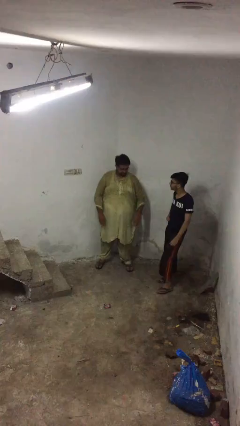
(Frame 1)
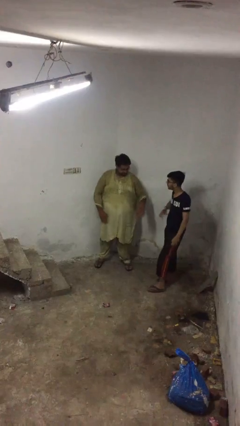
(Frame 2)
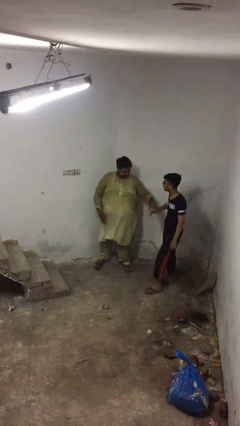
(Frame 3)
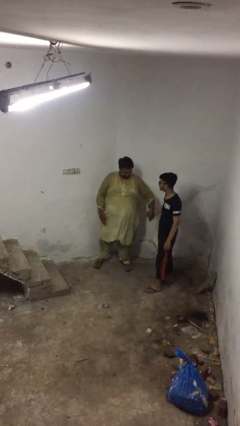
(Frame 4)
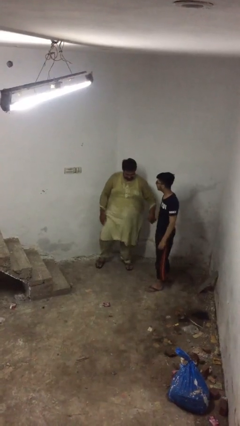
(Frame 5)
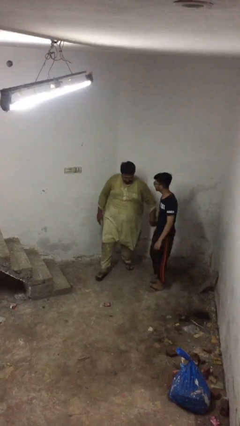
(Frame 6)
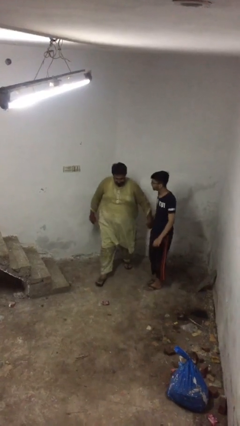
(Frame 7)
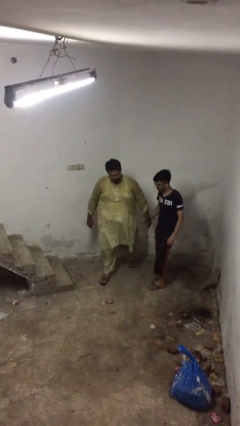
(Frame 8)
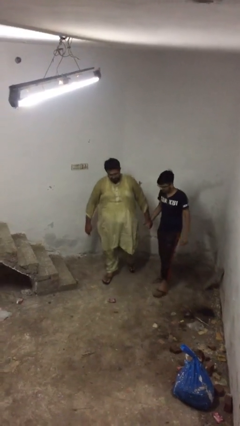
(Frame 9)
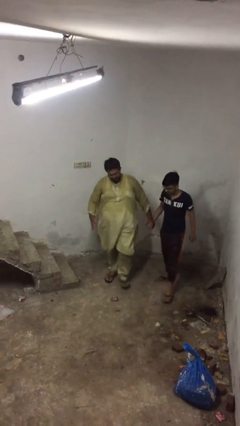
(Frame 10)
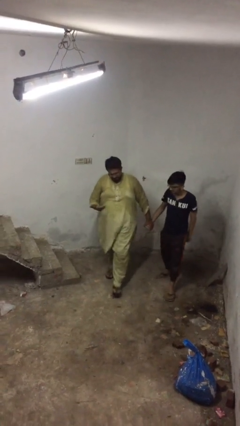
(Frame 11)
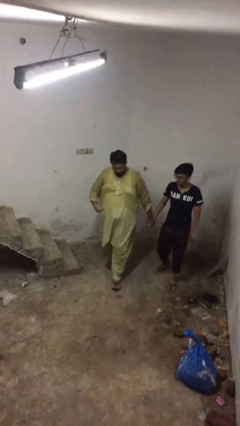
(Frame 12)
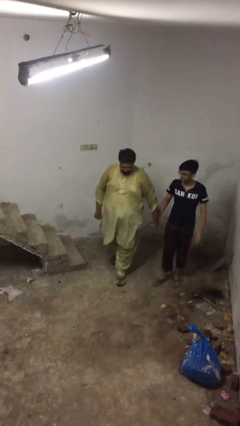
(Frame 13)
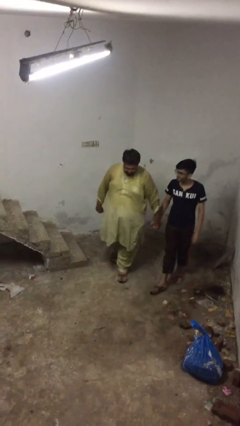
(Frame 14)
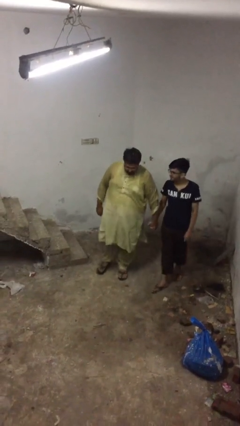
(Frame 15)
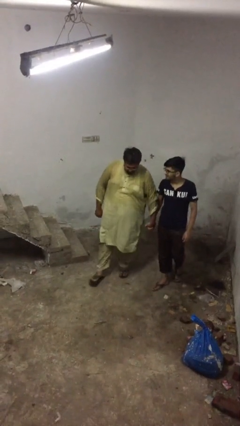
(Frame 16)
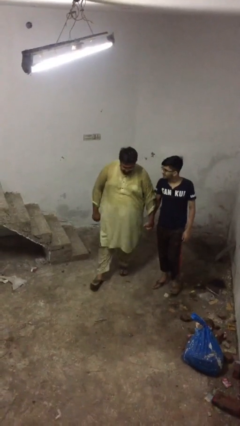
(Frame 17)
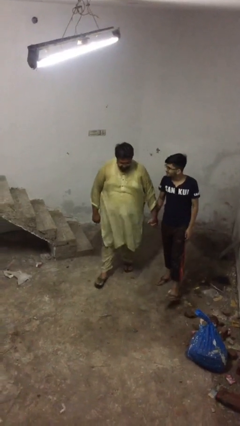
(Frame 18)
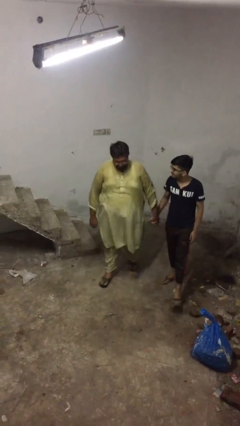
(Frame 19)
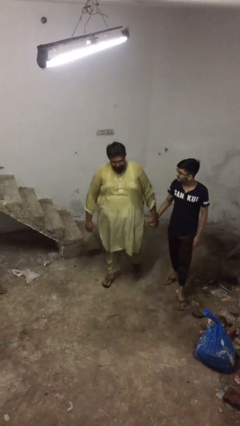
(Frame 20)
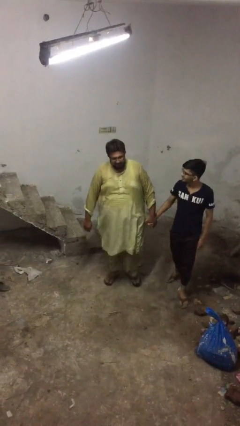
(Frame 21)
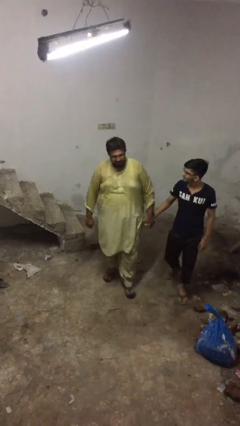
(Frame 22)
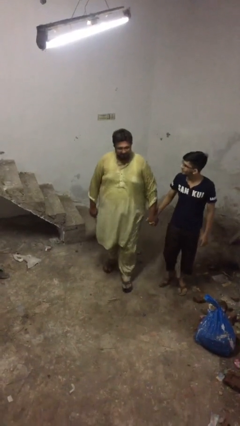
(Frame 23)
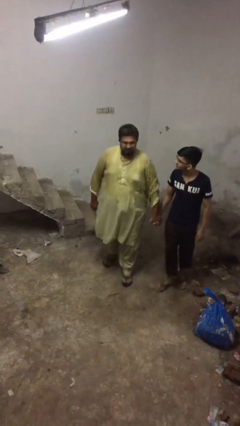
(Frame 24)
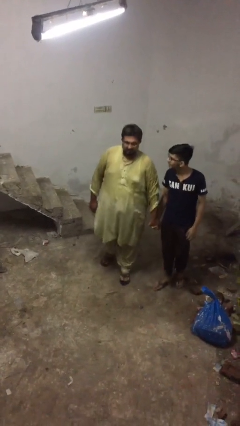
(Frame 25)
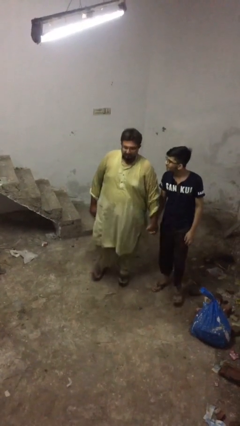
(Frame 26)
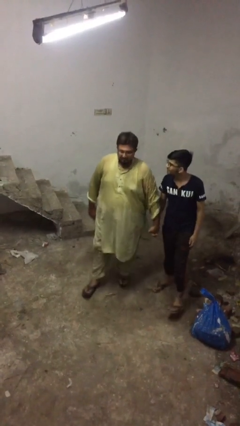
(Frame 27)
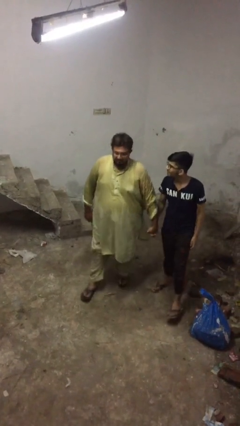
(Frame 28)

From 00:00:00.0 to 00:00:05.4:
person holds hand

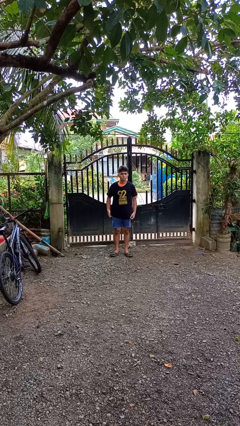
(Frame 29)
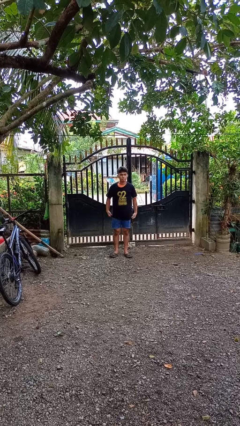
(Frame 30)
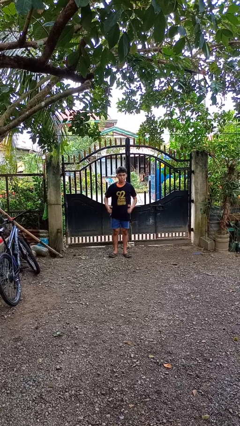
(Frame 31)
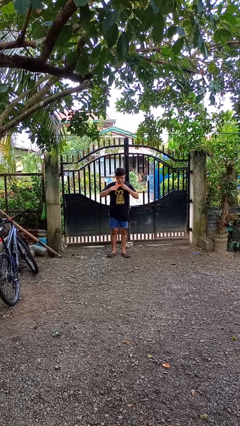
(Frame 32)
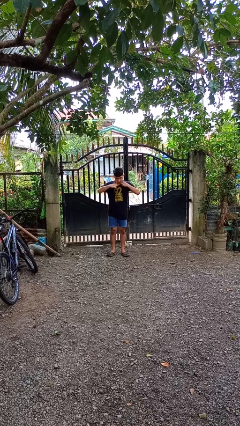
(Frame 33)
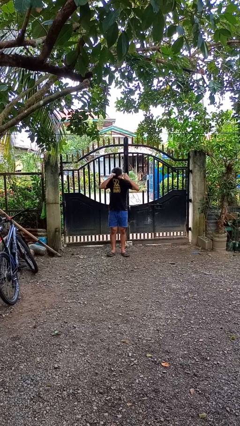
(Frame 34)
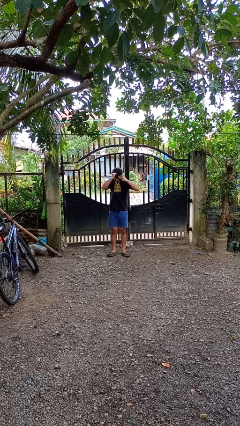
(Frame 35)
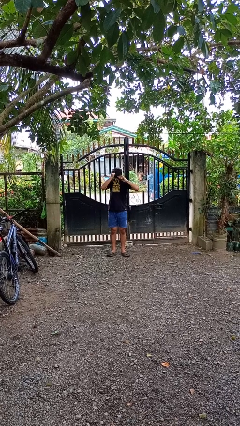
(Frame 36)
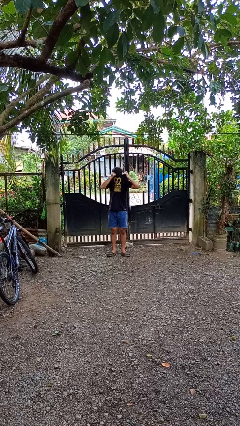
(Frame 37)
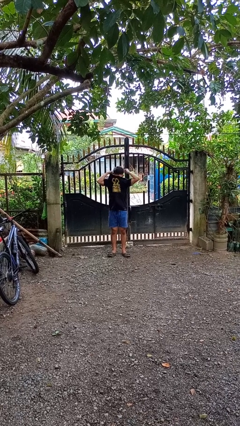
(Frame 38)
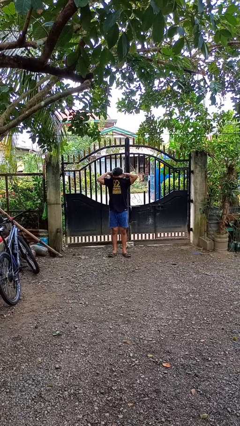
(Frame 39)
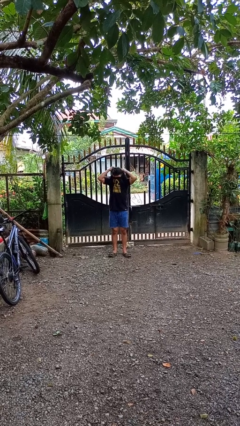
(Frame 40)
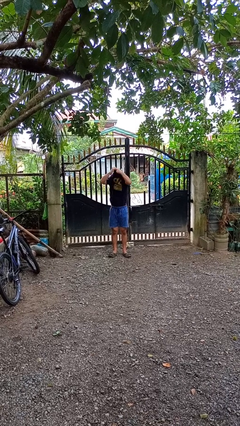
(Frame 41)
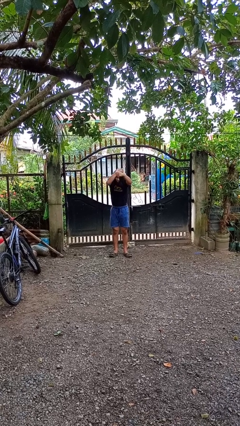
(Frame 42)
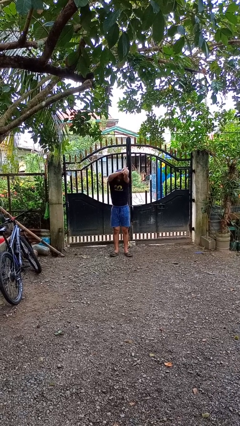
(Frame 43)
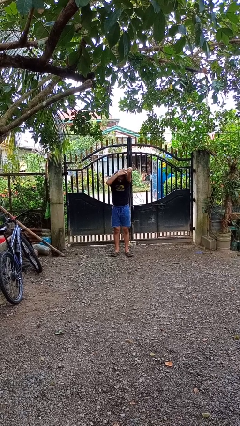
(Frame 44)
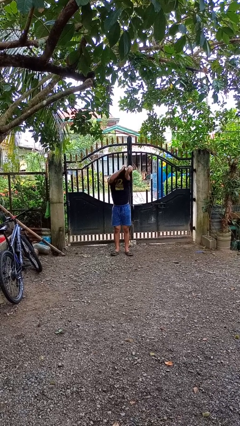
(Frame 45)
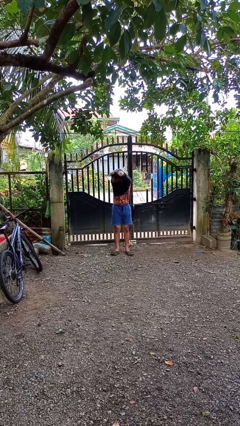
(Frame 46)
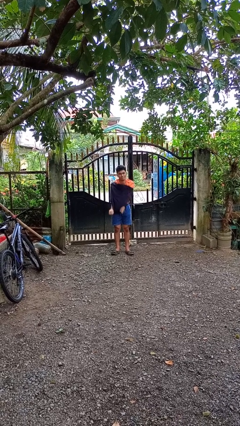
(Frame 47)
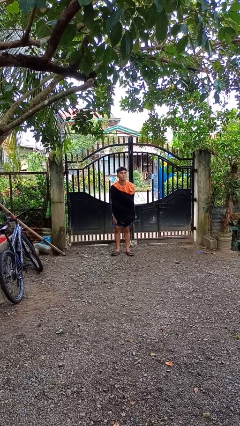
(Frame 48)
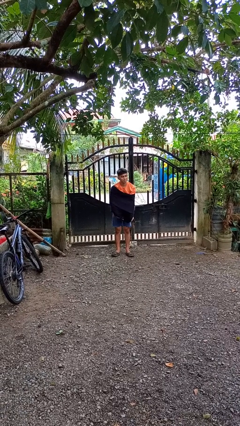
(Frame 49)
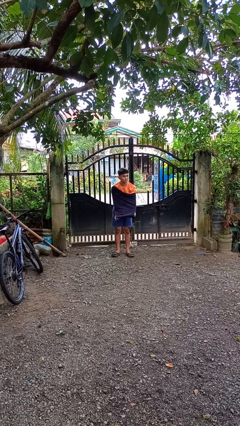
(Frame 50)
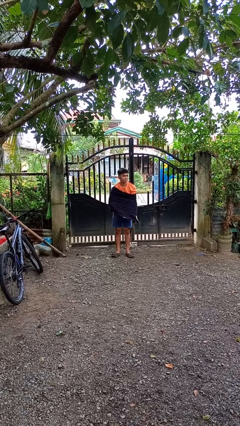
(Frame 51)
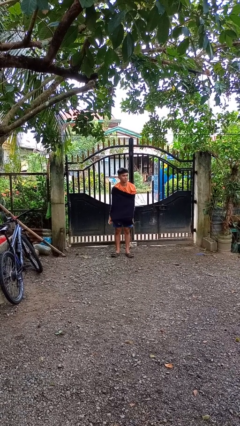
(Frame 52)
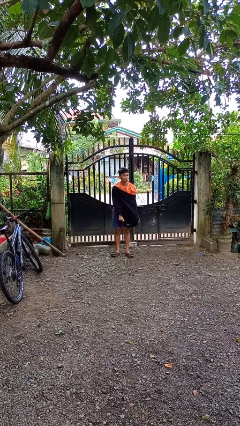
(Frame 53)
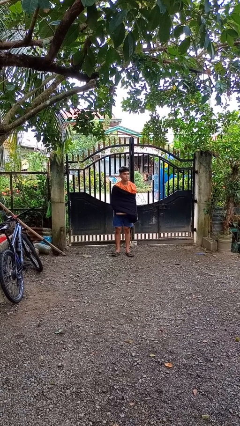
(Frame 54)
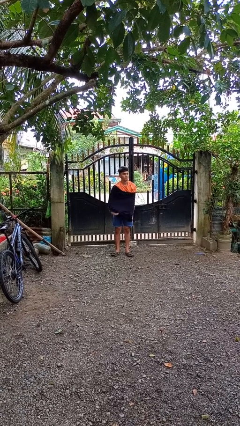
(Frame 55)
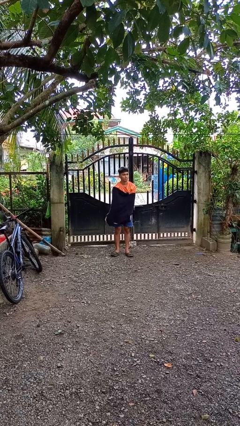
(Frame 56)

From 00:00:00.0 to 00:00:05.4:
person takes off shirt

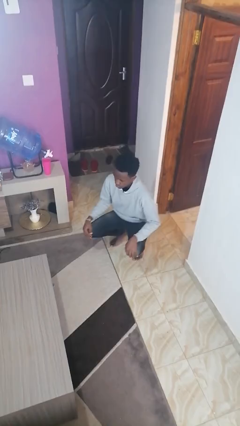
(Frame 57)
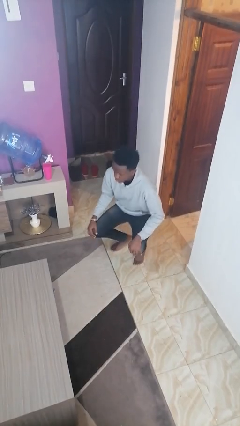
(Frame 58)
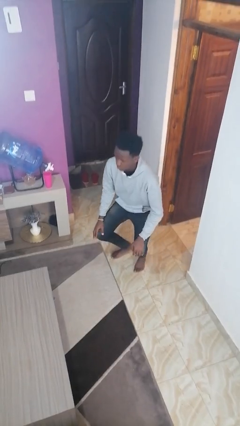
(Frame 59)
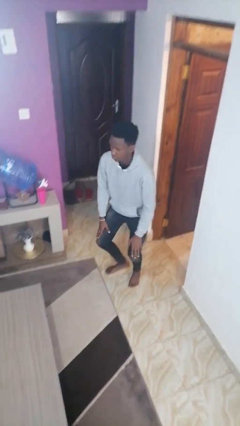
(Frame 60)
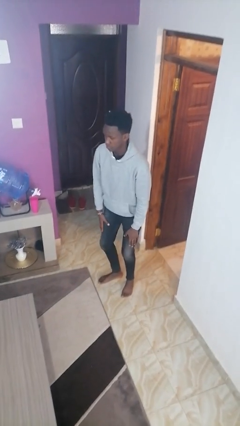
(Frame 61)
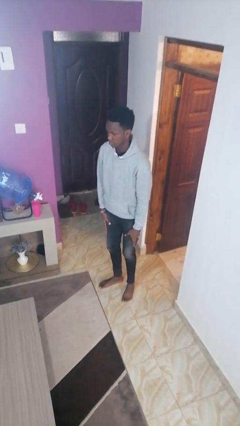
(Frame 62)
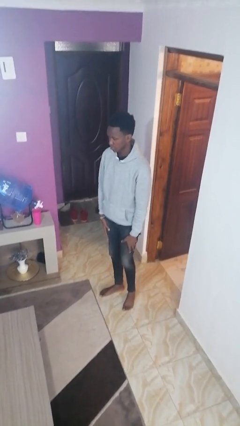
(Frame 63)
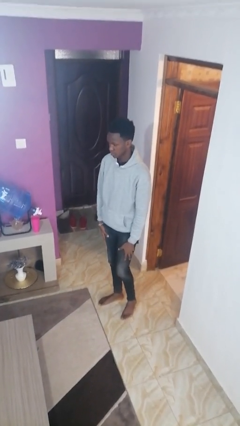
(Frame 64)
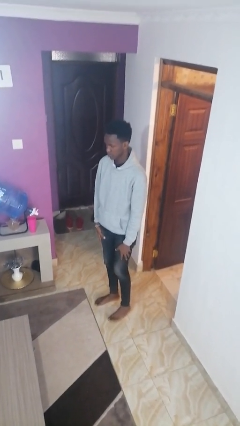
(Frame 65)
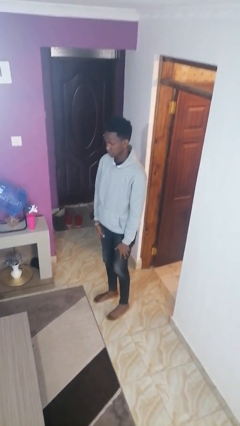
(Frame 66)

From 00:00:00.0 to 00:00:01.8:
person stands up

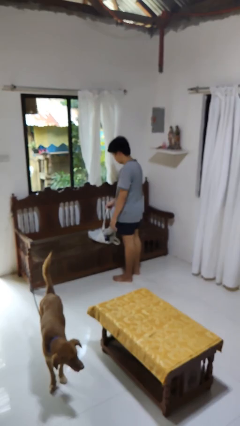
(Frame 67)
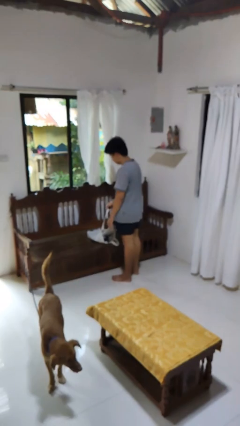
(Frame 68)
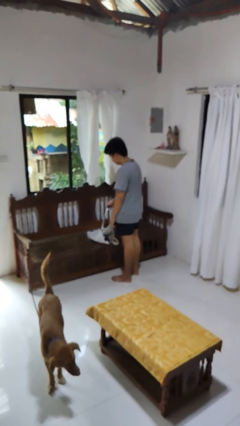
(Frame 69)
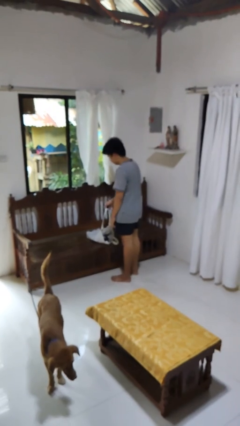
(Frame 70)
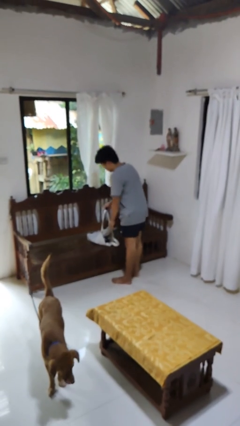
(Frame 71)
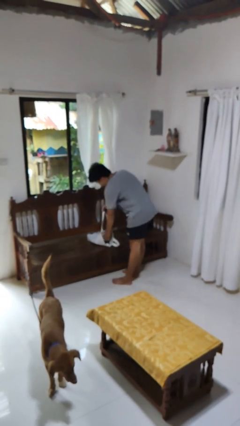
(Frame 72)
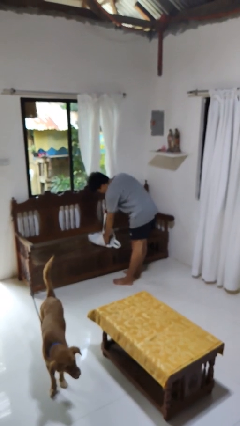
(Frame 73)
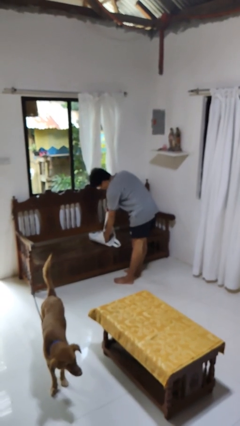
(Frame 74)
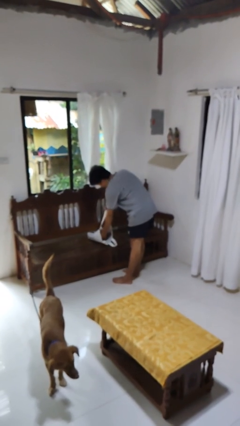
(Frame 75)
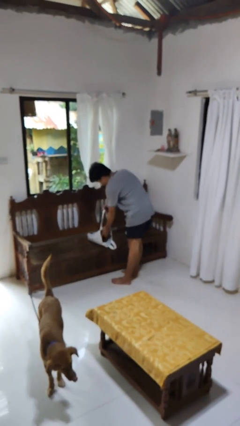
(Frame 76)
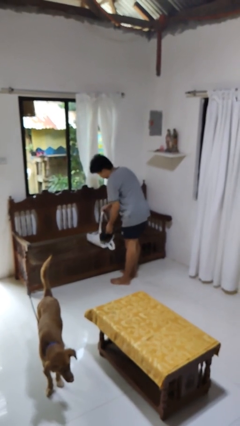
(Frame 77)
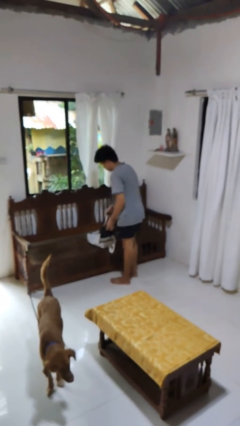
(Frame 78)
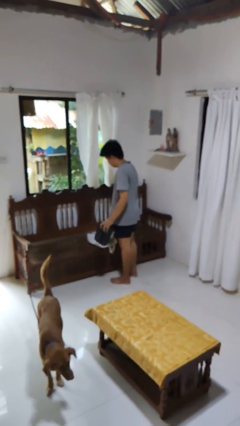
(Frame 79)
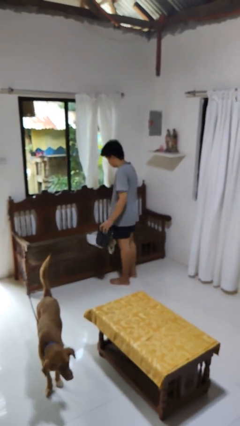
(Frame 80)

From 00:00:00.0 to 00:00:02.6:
person takes object from bag

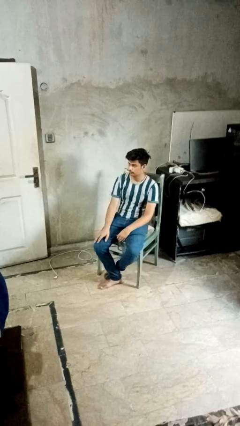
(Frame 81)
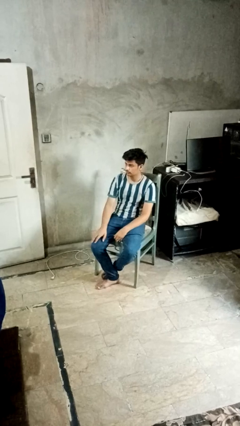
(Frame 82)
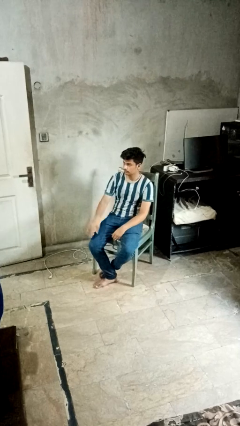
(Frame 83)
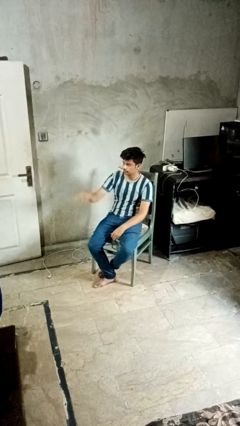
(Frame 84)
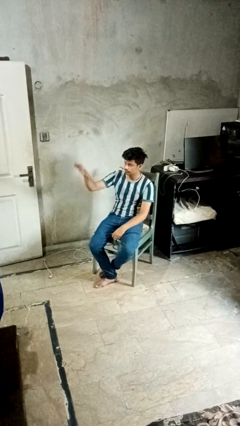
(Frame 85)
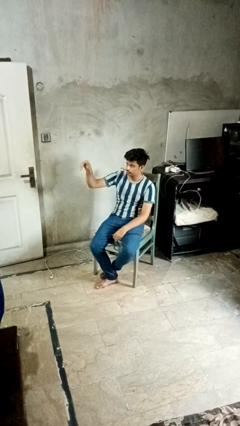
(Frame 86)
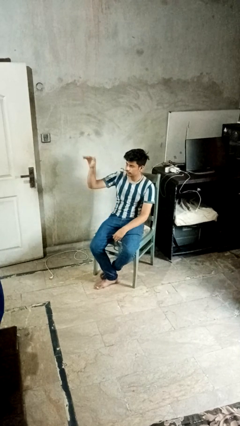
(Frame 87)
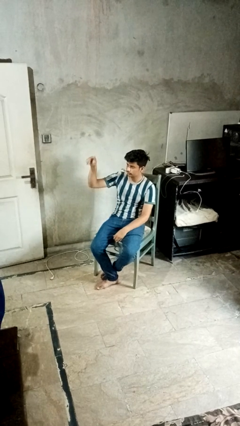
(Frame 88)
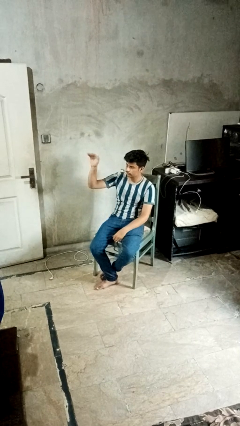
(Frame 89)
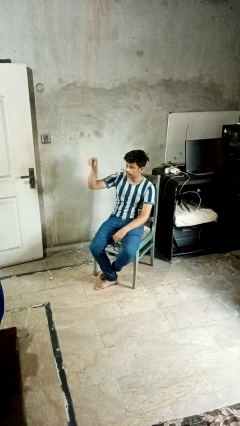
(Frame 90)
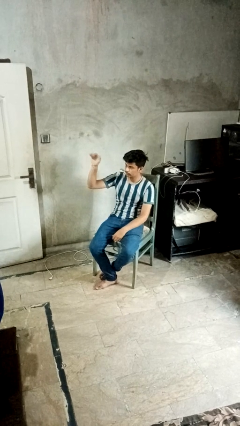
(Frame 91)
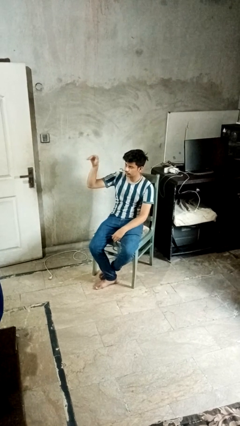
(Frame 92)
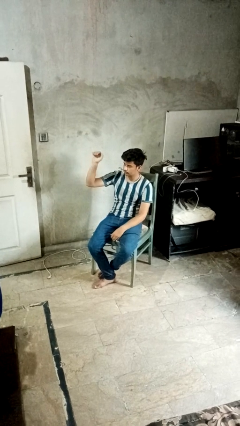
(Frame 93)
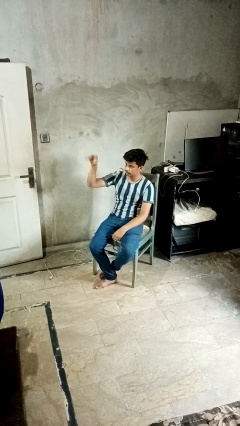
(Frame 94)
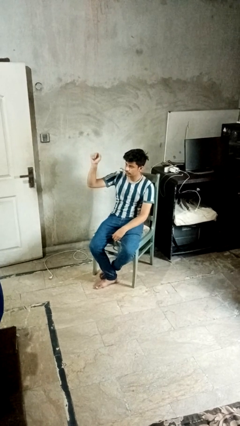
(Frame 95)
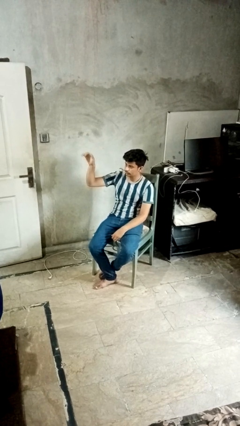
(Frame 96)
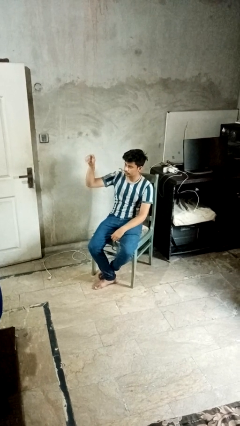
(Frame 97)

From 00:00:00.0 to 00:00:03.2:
person gestures come here
